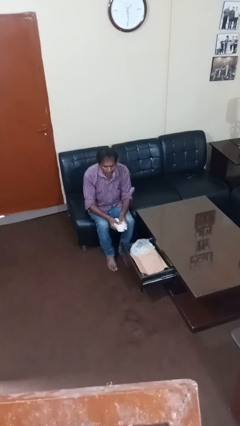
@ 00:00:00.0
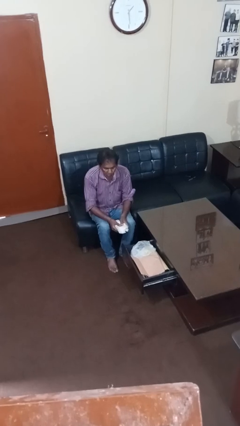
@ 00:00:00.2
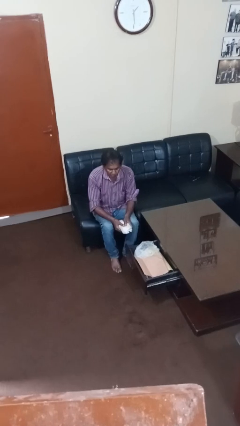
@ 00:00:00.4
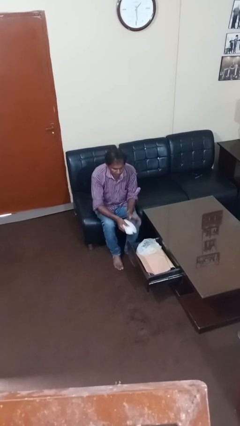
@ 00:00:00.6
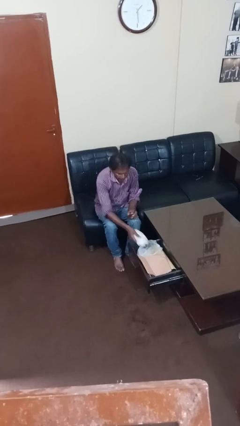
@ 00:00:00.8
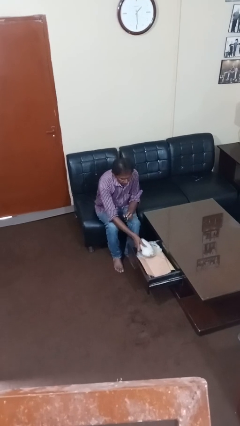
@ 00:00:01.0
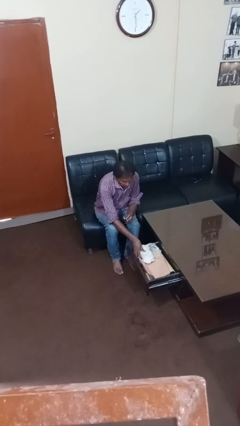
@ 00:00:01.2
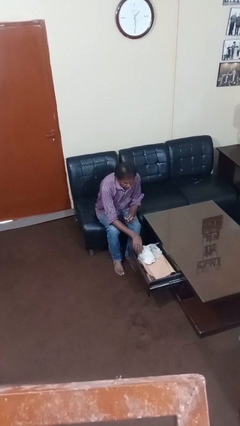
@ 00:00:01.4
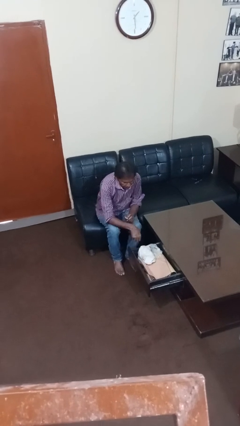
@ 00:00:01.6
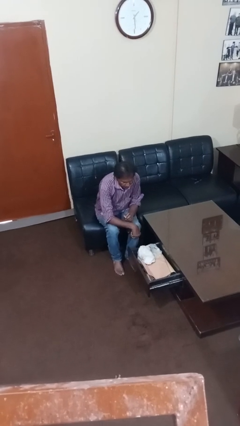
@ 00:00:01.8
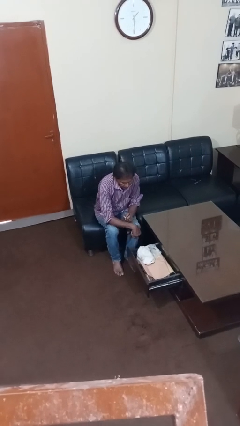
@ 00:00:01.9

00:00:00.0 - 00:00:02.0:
person puts clothes into dresser

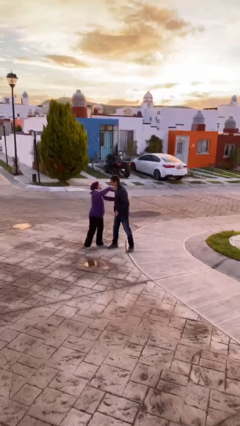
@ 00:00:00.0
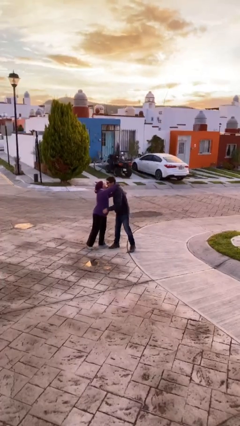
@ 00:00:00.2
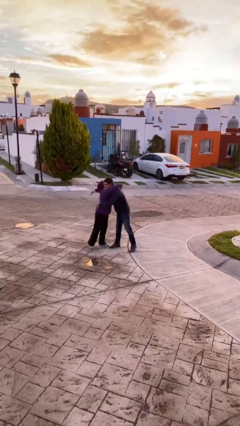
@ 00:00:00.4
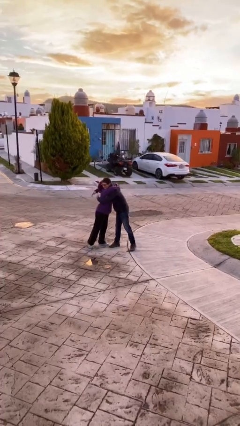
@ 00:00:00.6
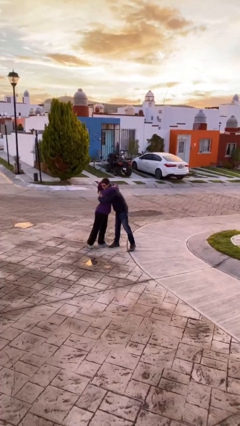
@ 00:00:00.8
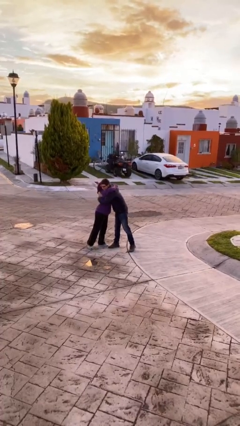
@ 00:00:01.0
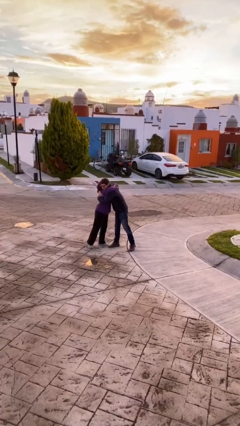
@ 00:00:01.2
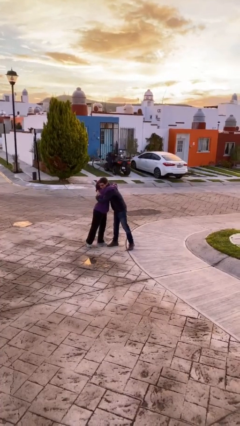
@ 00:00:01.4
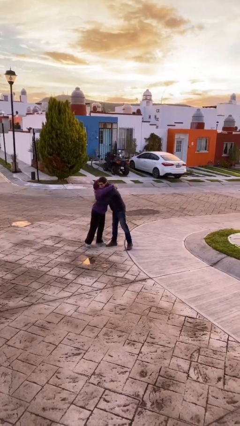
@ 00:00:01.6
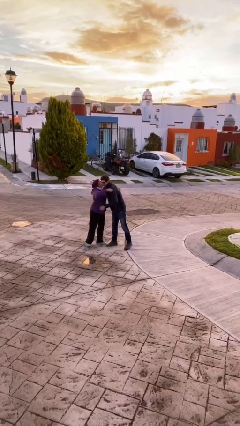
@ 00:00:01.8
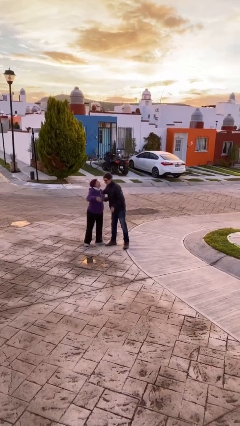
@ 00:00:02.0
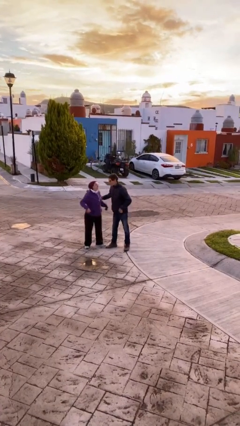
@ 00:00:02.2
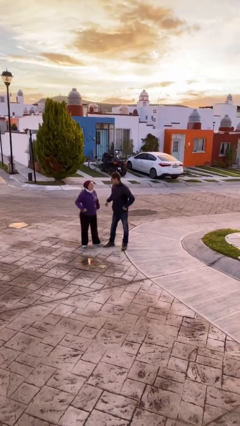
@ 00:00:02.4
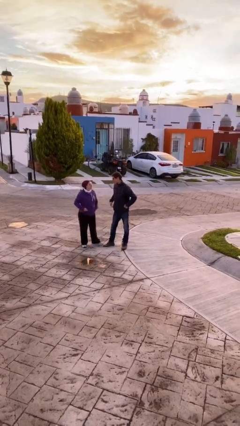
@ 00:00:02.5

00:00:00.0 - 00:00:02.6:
person embraces person

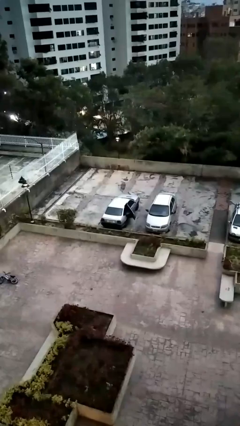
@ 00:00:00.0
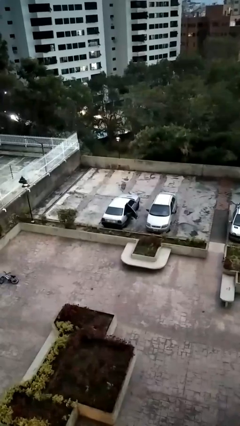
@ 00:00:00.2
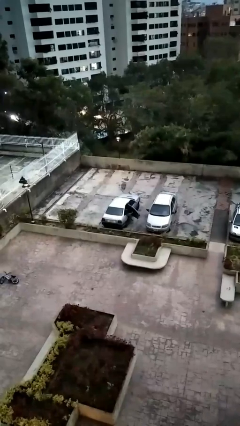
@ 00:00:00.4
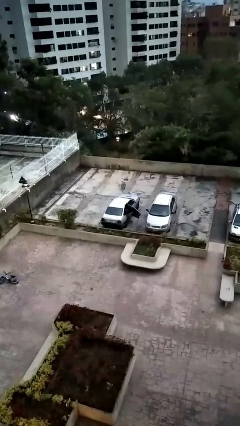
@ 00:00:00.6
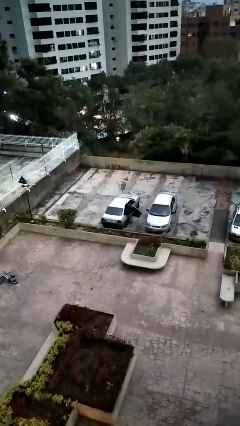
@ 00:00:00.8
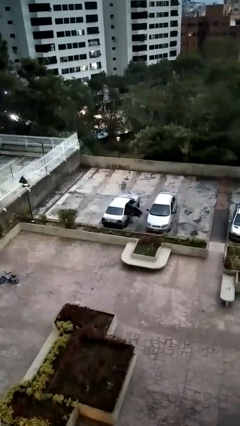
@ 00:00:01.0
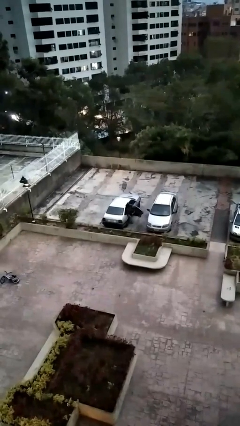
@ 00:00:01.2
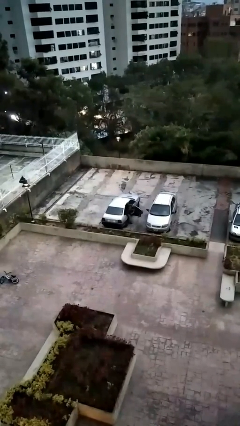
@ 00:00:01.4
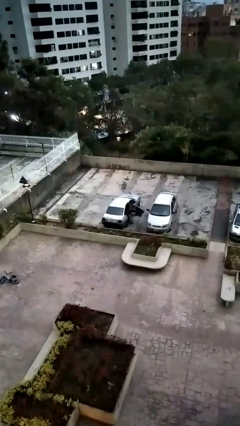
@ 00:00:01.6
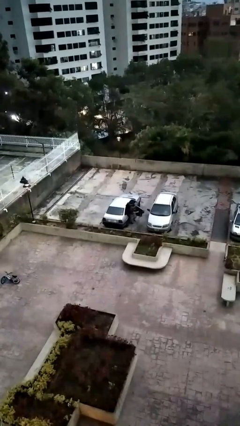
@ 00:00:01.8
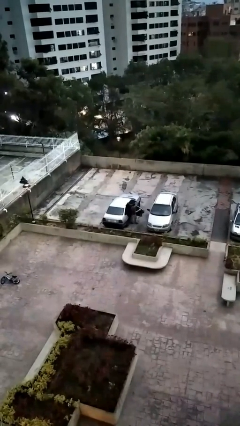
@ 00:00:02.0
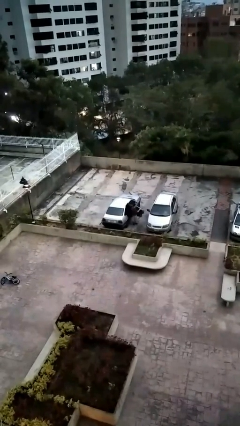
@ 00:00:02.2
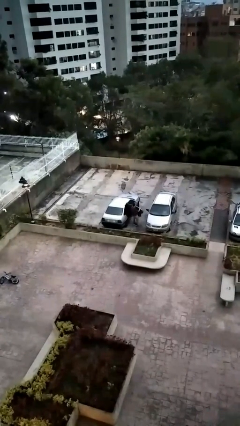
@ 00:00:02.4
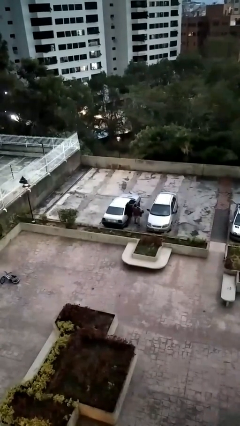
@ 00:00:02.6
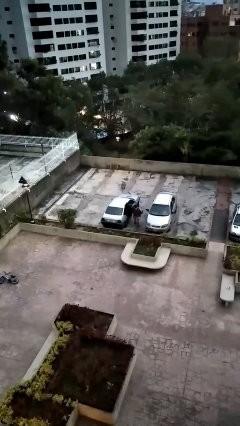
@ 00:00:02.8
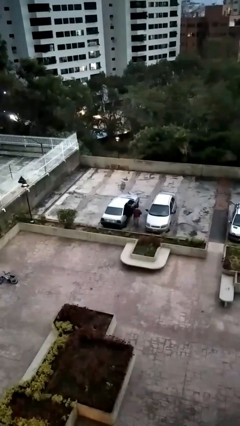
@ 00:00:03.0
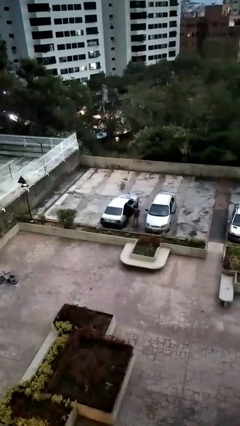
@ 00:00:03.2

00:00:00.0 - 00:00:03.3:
car drops off person

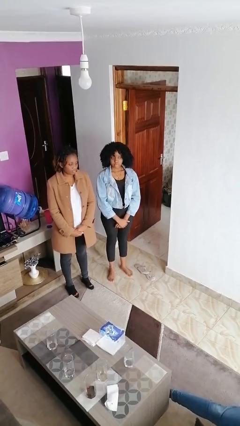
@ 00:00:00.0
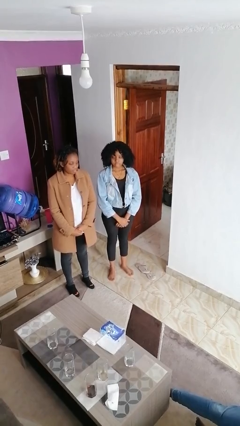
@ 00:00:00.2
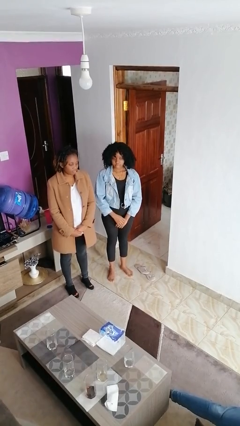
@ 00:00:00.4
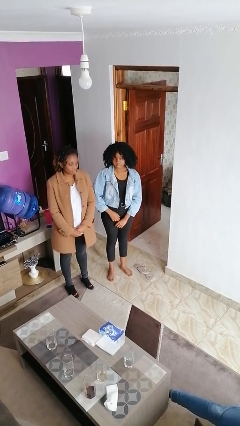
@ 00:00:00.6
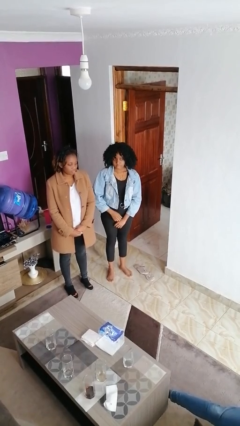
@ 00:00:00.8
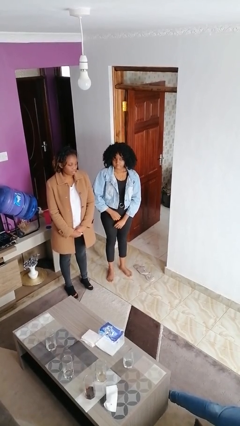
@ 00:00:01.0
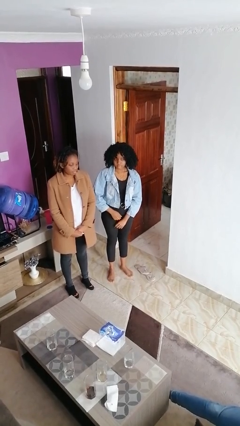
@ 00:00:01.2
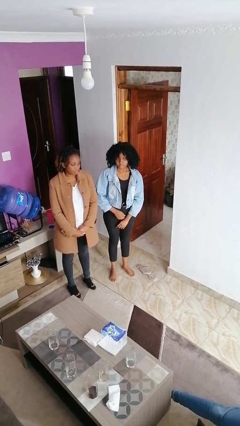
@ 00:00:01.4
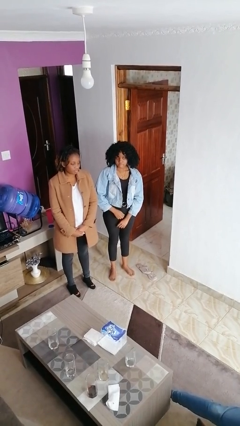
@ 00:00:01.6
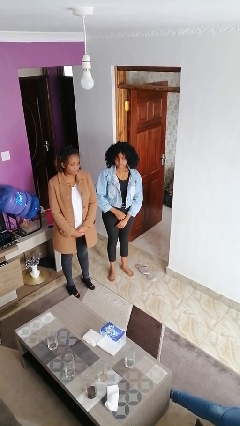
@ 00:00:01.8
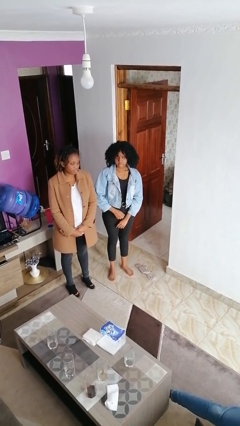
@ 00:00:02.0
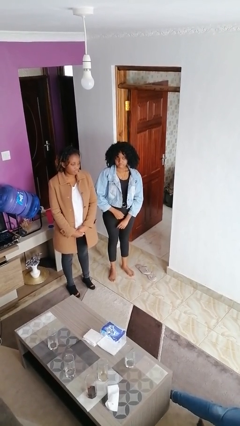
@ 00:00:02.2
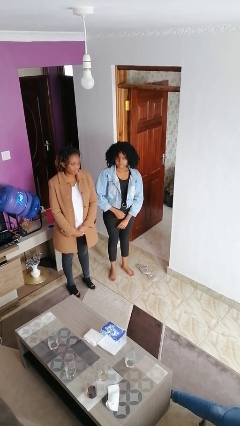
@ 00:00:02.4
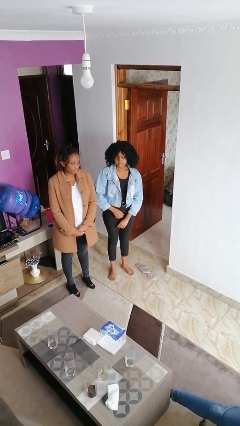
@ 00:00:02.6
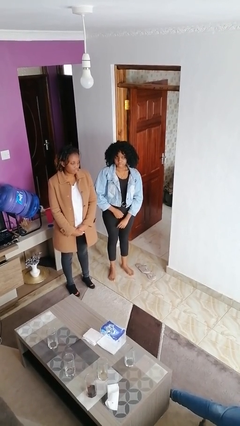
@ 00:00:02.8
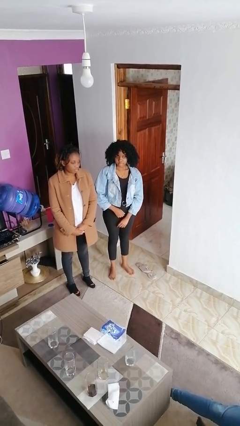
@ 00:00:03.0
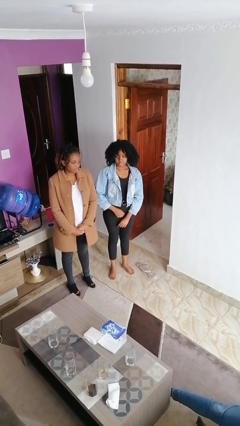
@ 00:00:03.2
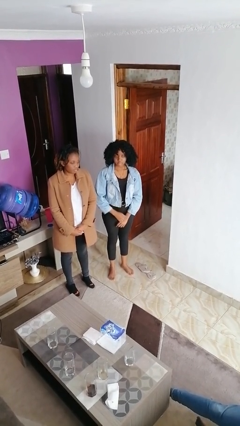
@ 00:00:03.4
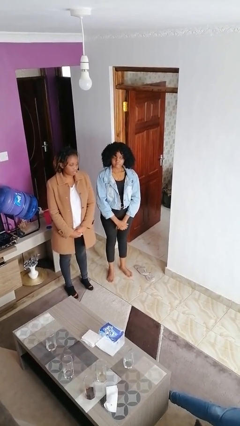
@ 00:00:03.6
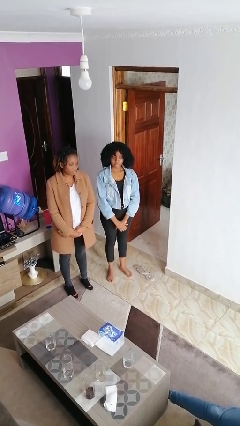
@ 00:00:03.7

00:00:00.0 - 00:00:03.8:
person nudges person with elbow

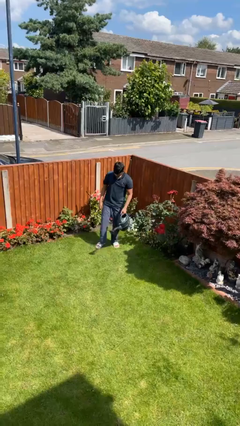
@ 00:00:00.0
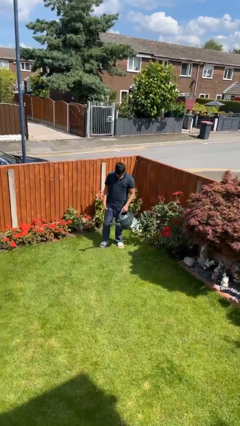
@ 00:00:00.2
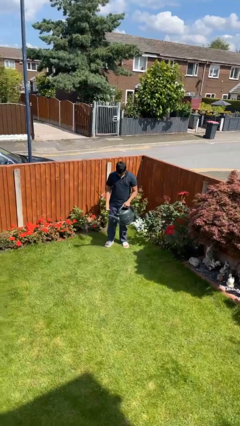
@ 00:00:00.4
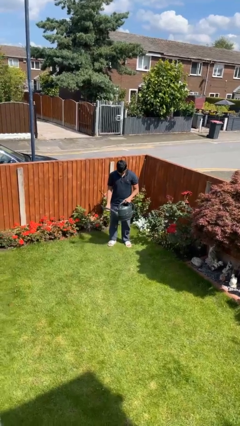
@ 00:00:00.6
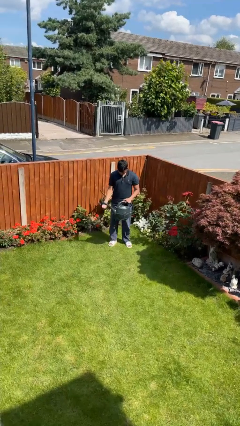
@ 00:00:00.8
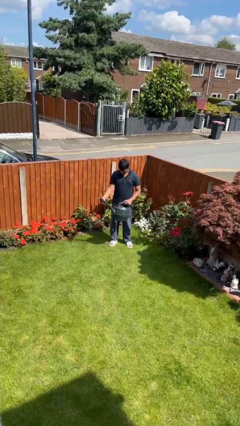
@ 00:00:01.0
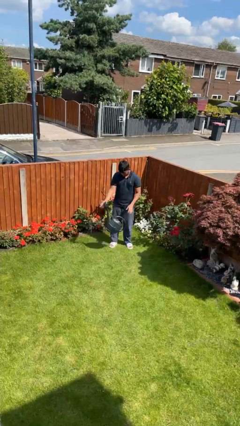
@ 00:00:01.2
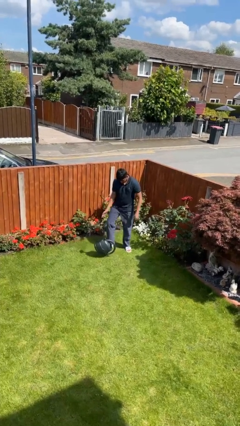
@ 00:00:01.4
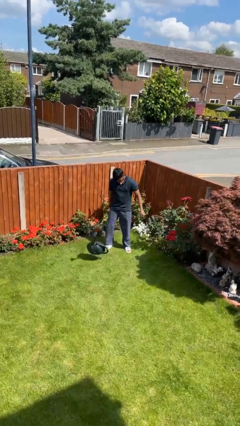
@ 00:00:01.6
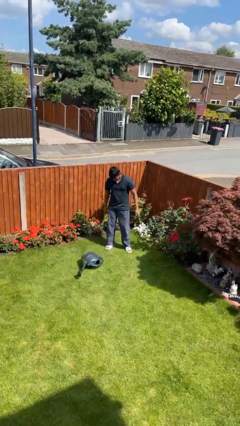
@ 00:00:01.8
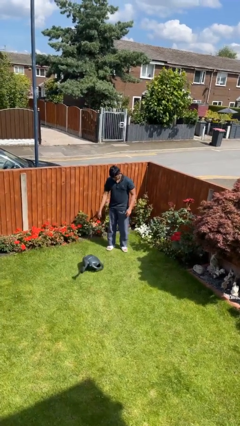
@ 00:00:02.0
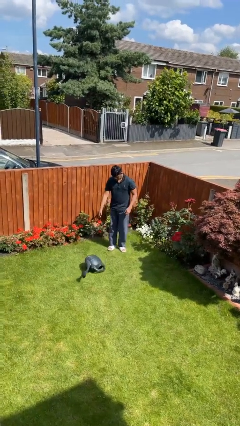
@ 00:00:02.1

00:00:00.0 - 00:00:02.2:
person drops object

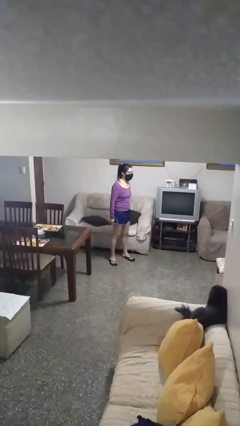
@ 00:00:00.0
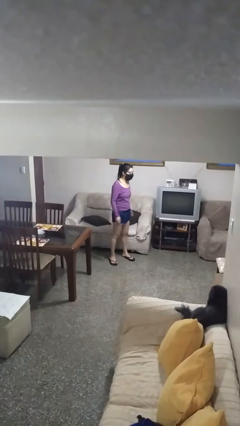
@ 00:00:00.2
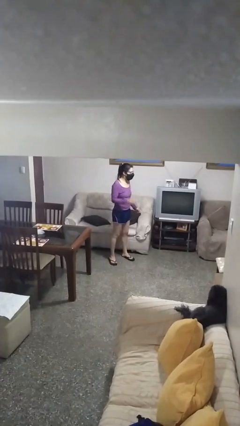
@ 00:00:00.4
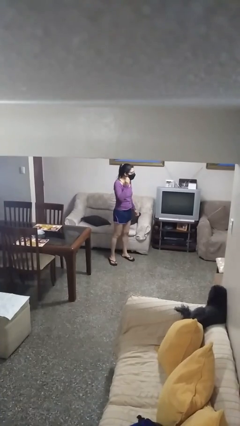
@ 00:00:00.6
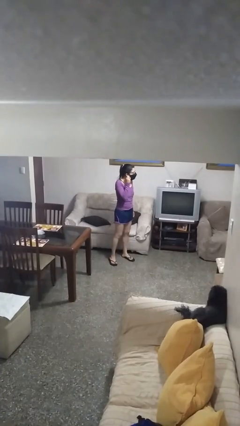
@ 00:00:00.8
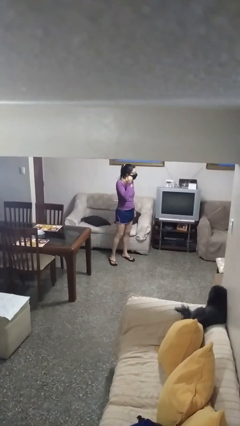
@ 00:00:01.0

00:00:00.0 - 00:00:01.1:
person takes off facemask

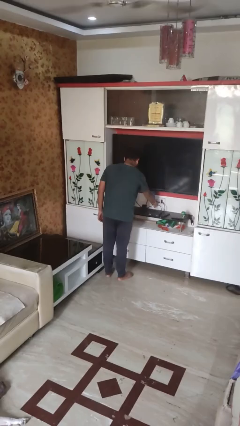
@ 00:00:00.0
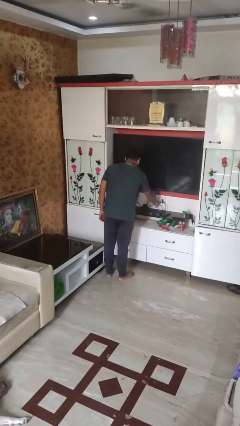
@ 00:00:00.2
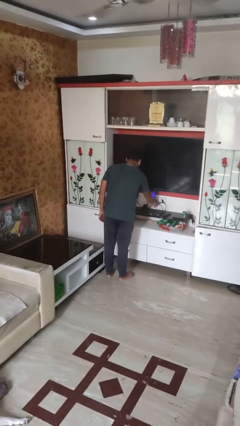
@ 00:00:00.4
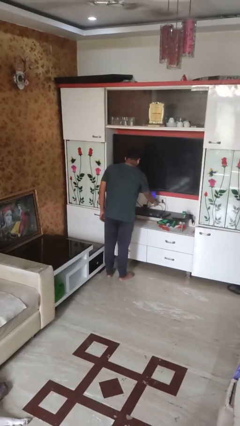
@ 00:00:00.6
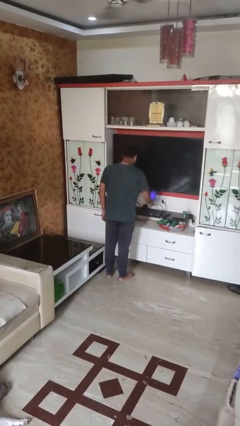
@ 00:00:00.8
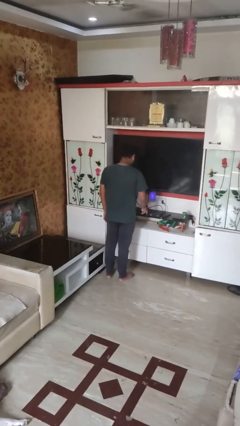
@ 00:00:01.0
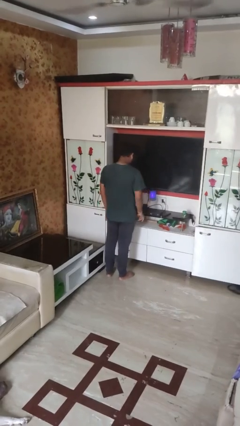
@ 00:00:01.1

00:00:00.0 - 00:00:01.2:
person turns on lamp

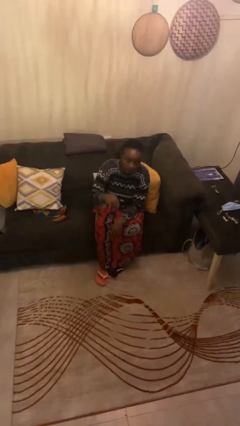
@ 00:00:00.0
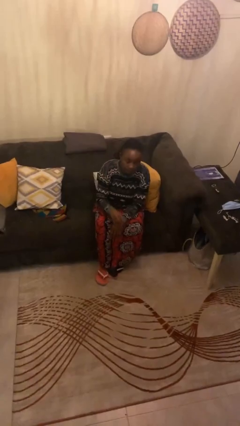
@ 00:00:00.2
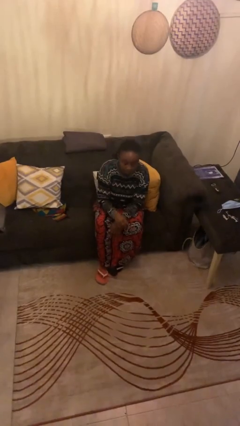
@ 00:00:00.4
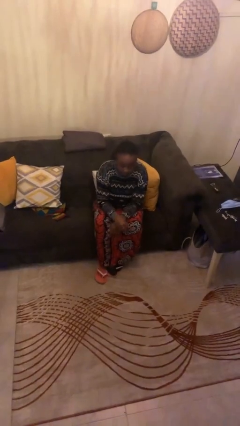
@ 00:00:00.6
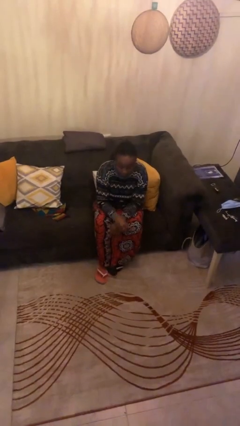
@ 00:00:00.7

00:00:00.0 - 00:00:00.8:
person gestures lower hand
